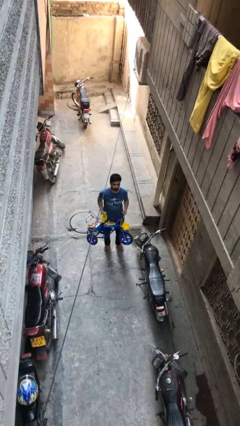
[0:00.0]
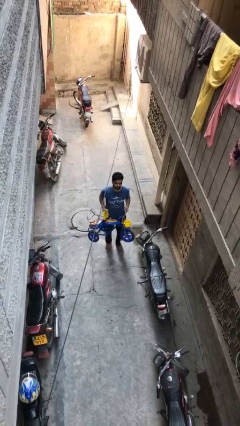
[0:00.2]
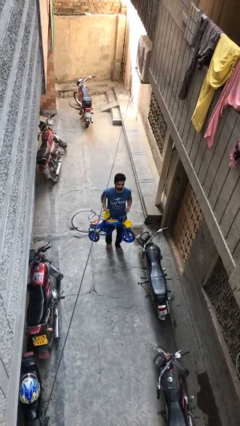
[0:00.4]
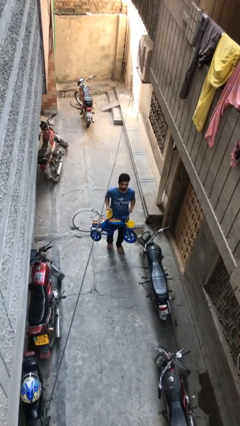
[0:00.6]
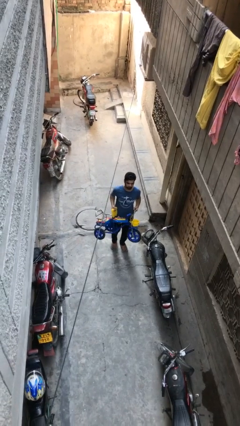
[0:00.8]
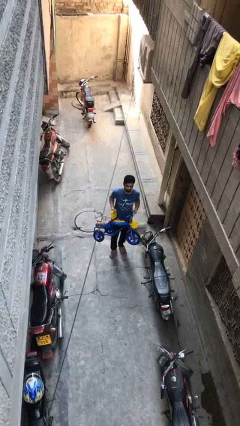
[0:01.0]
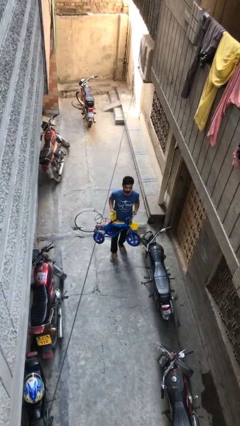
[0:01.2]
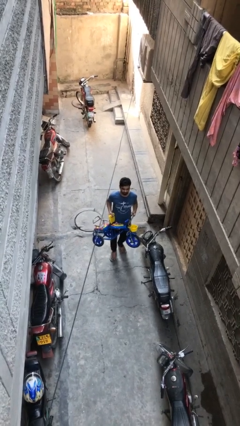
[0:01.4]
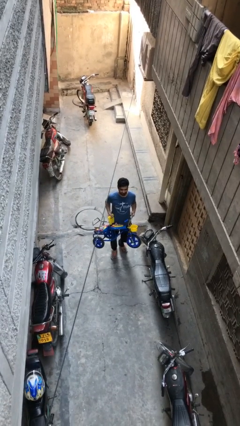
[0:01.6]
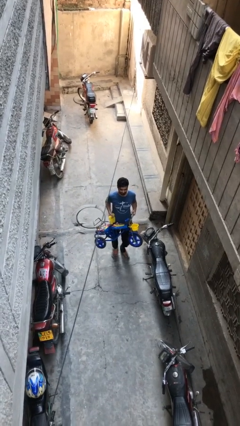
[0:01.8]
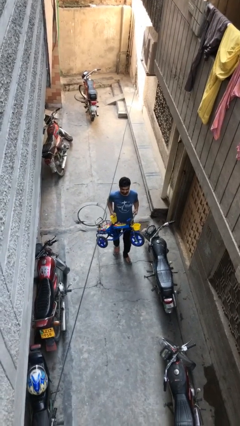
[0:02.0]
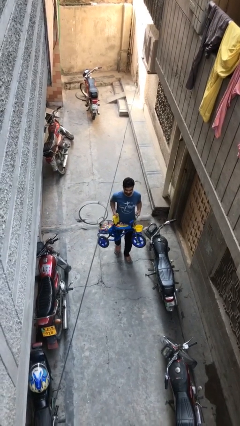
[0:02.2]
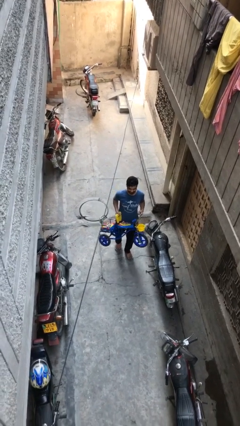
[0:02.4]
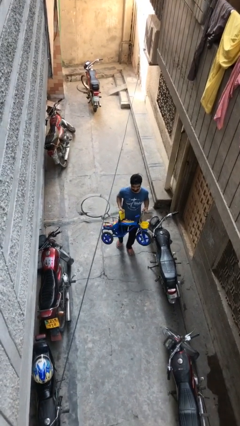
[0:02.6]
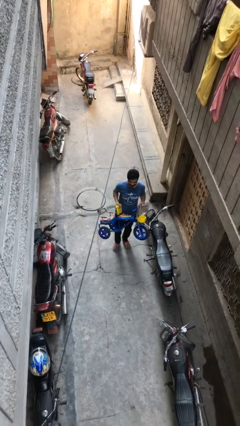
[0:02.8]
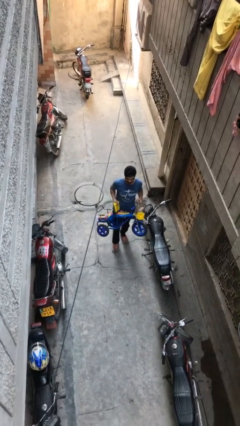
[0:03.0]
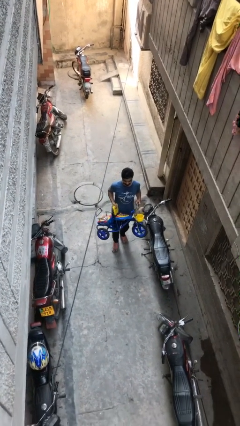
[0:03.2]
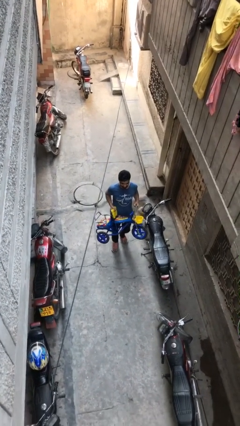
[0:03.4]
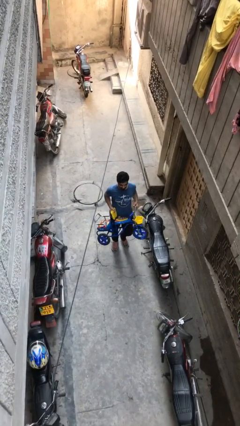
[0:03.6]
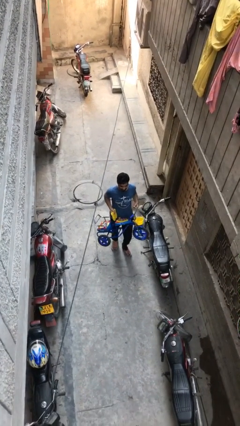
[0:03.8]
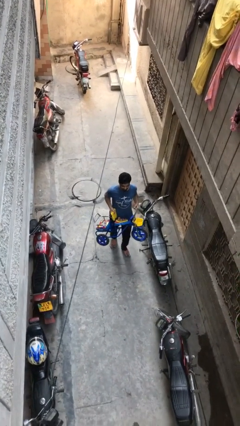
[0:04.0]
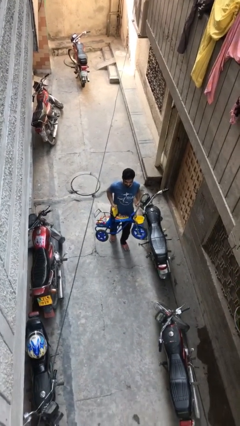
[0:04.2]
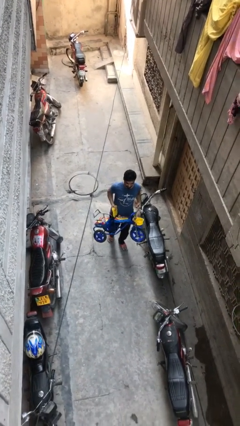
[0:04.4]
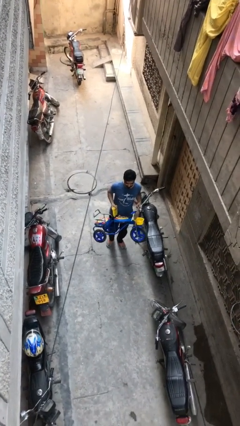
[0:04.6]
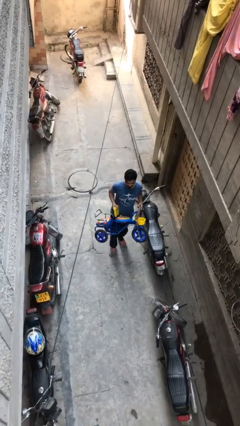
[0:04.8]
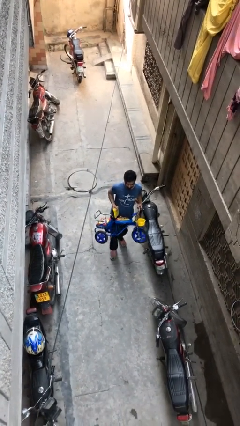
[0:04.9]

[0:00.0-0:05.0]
person carries heavy object

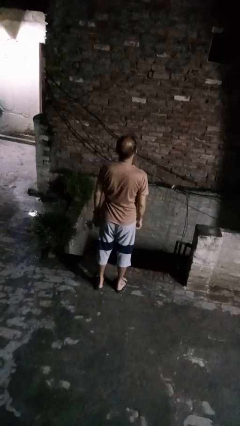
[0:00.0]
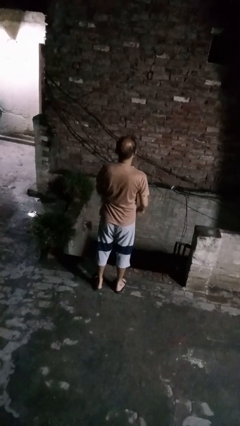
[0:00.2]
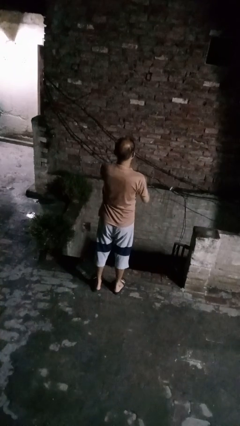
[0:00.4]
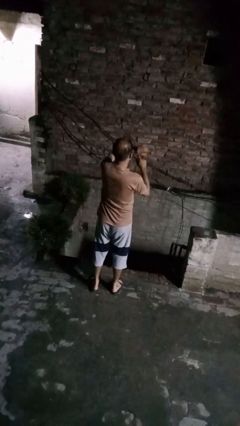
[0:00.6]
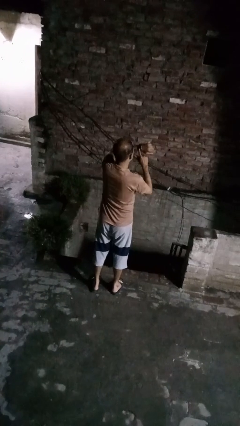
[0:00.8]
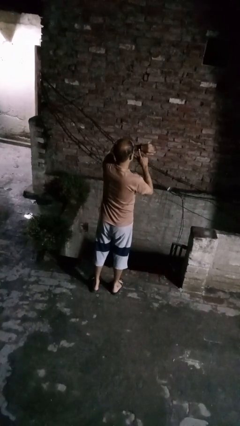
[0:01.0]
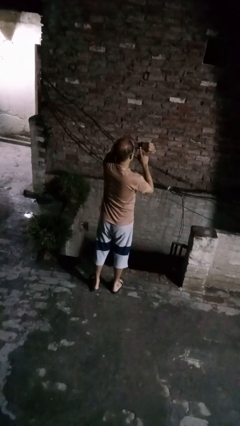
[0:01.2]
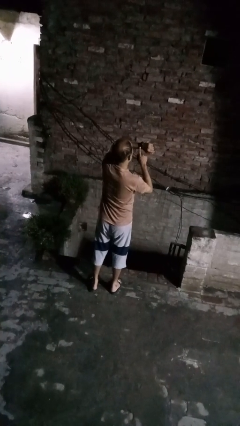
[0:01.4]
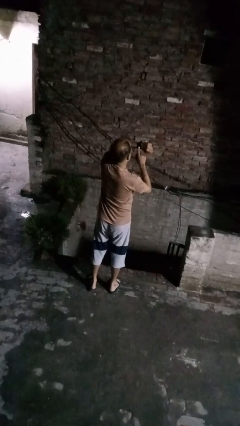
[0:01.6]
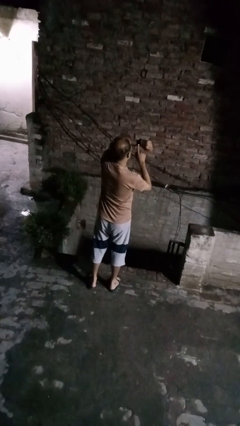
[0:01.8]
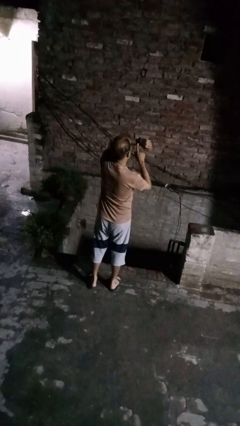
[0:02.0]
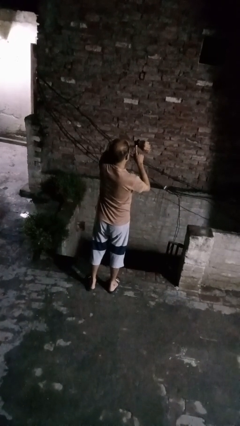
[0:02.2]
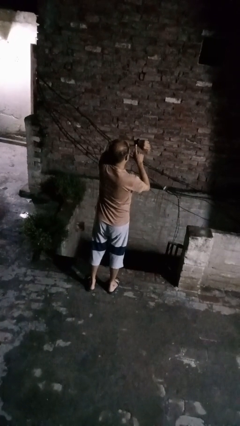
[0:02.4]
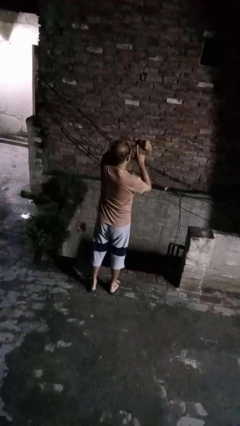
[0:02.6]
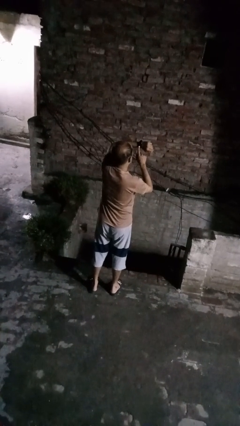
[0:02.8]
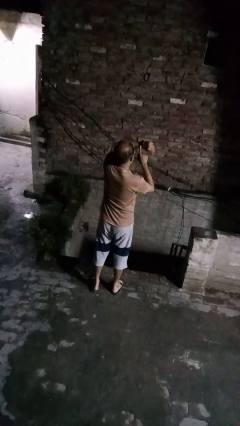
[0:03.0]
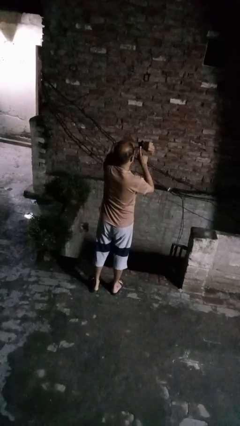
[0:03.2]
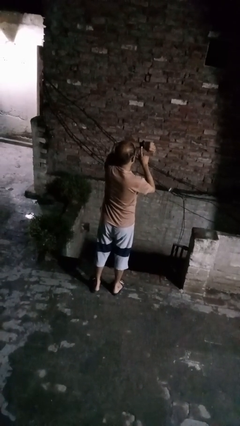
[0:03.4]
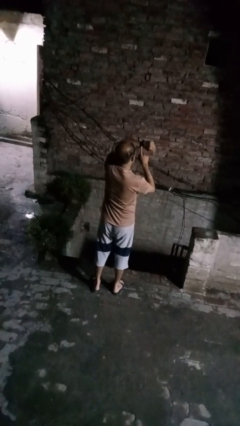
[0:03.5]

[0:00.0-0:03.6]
person gestures watch closely

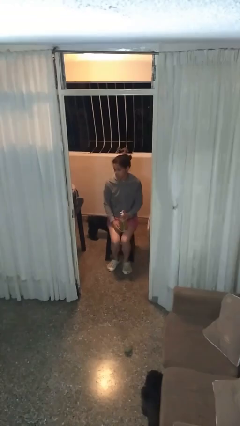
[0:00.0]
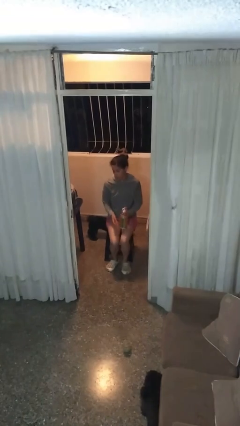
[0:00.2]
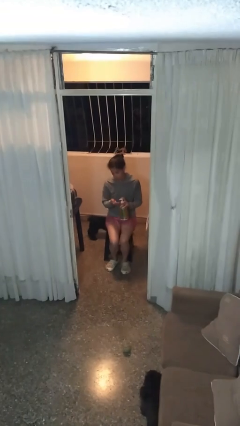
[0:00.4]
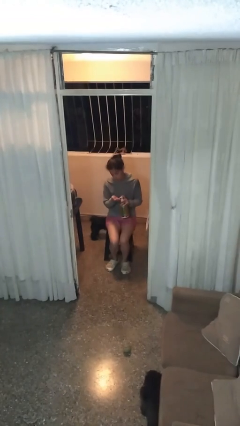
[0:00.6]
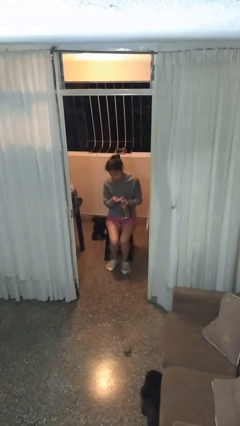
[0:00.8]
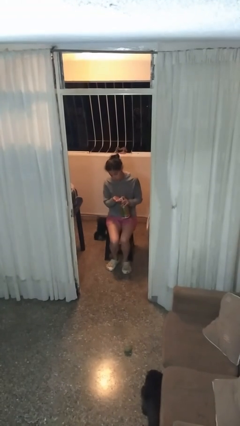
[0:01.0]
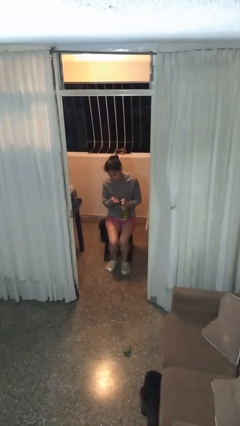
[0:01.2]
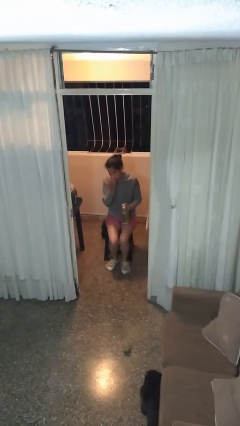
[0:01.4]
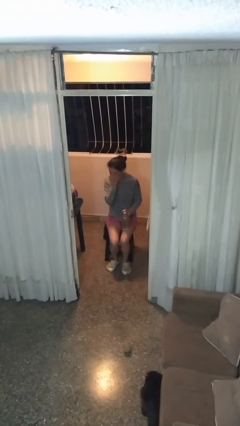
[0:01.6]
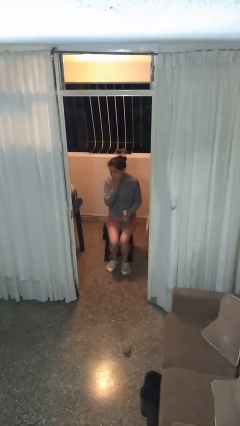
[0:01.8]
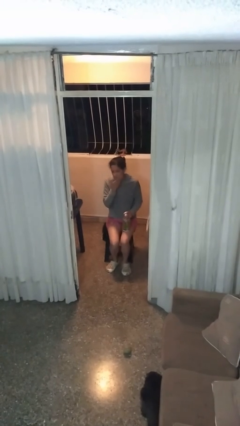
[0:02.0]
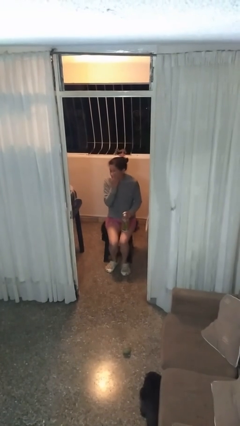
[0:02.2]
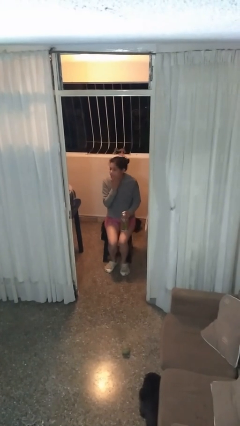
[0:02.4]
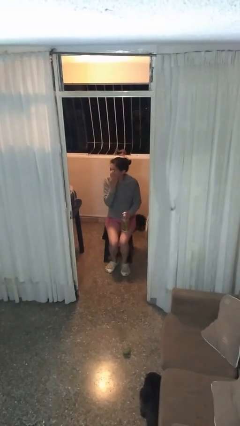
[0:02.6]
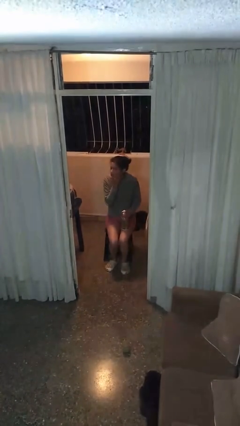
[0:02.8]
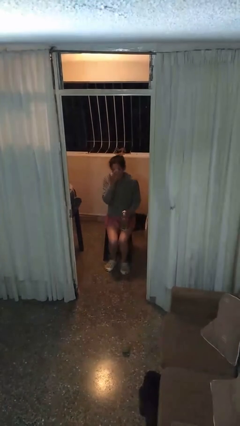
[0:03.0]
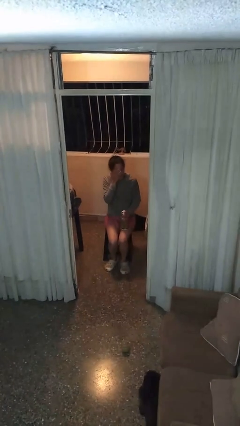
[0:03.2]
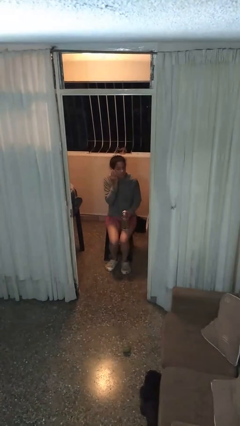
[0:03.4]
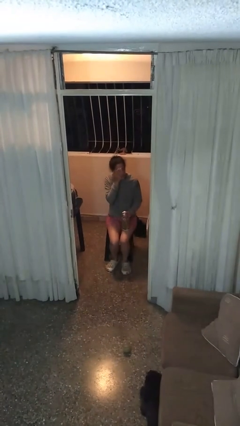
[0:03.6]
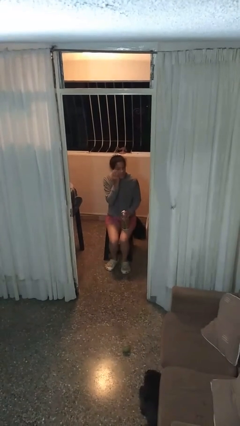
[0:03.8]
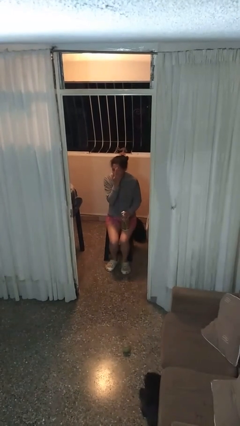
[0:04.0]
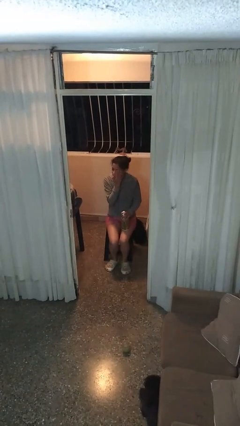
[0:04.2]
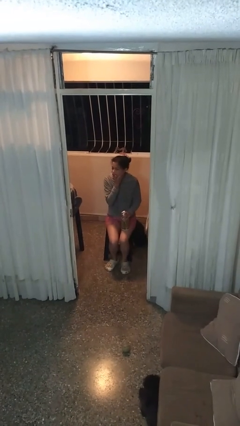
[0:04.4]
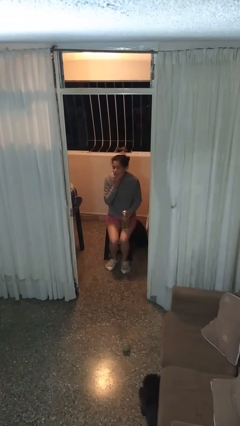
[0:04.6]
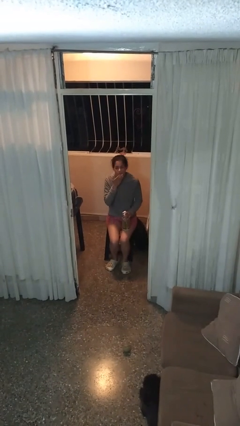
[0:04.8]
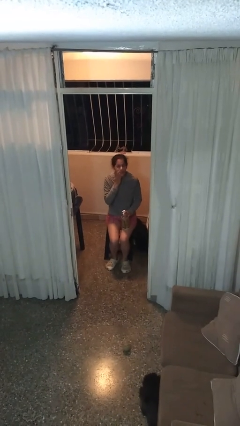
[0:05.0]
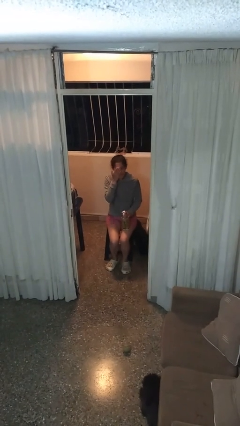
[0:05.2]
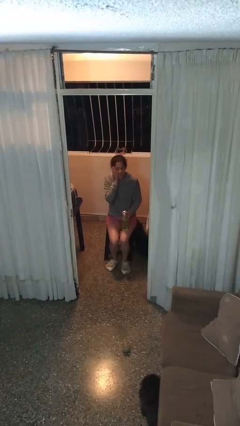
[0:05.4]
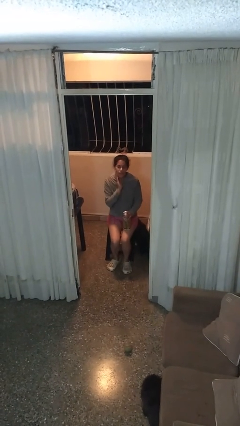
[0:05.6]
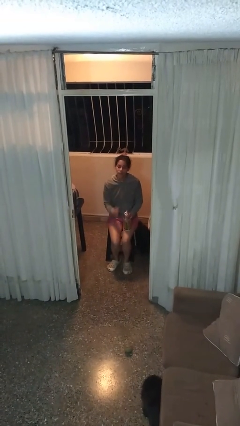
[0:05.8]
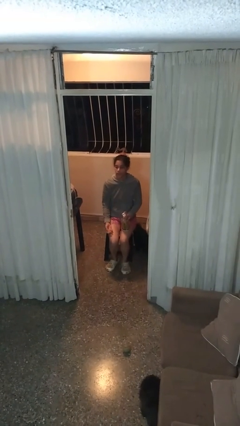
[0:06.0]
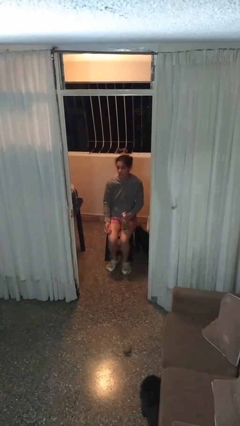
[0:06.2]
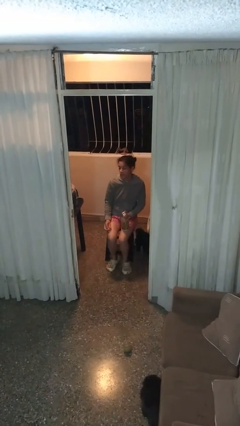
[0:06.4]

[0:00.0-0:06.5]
person applies facial moisturizer

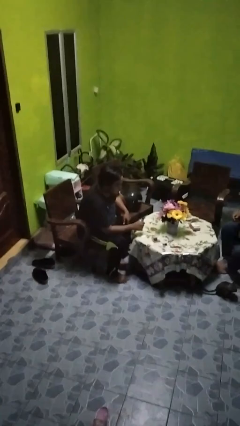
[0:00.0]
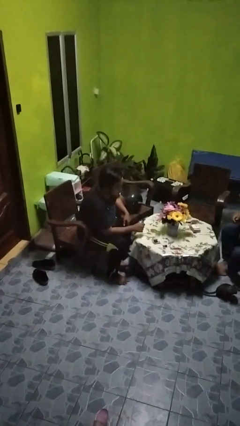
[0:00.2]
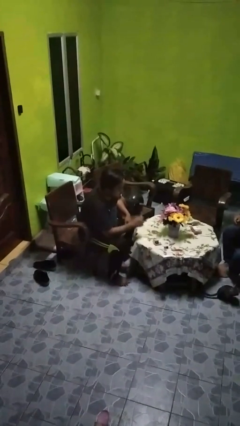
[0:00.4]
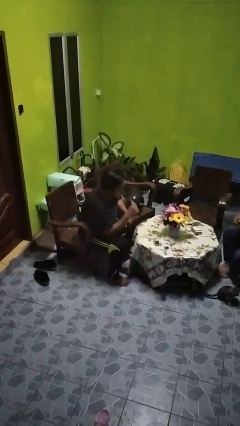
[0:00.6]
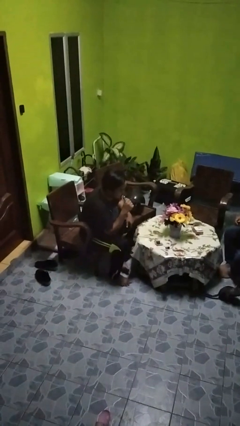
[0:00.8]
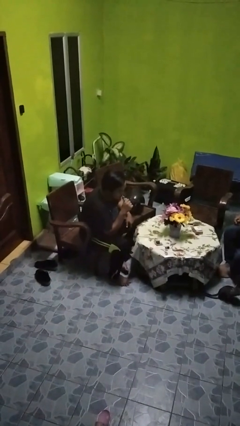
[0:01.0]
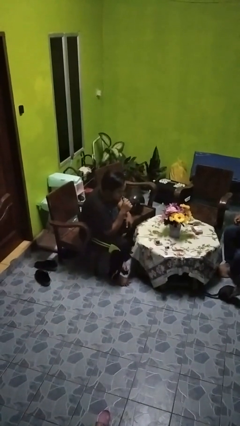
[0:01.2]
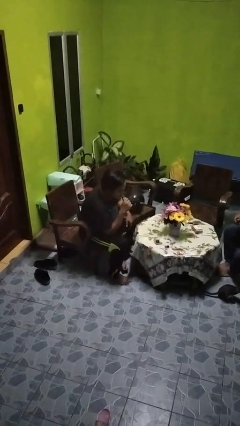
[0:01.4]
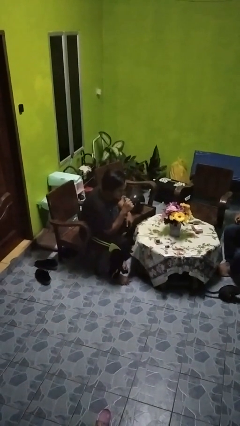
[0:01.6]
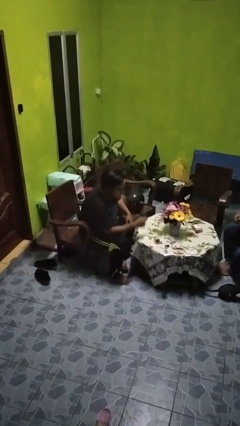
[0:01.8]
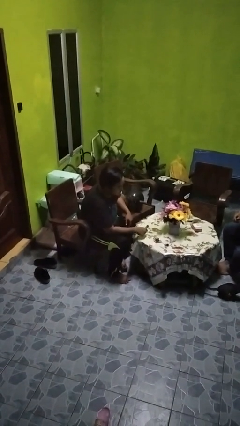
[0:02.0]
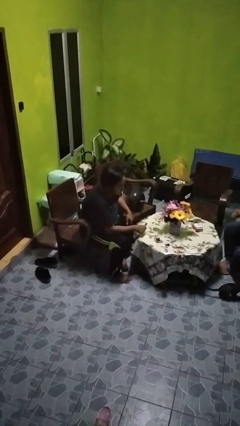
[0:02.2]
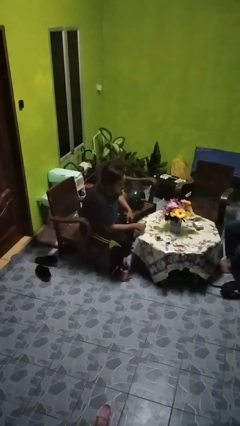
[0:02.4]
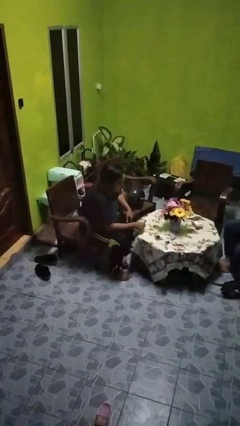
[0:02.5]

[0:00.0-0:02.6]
person vapes
